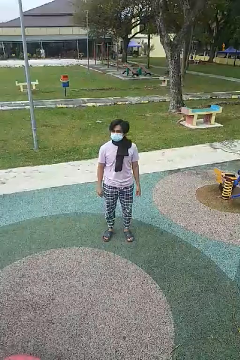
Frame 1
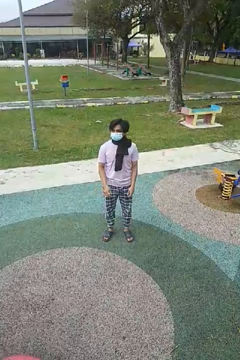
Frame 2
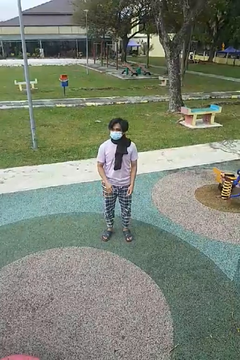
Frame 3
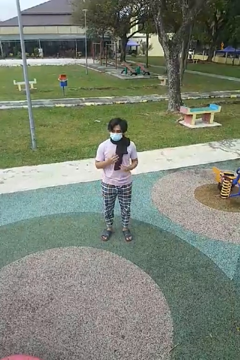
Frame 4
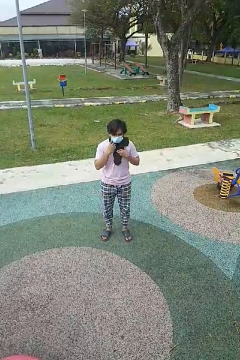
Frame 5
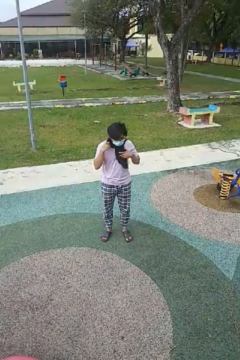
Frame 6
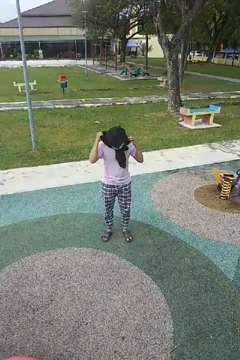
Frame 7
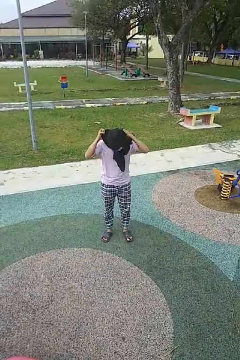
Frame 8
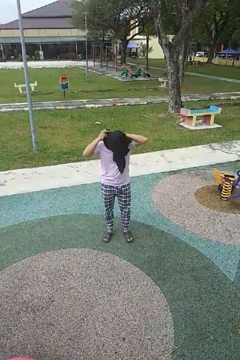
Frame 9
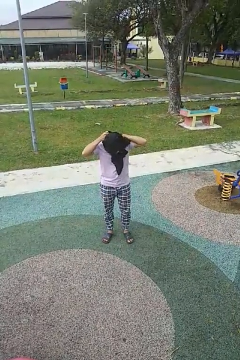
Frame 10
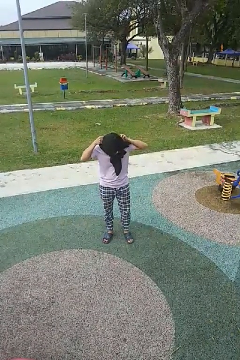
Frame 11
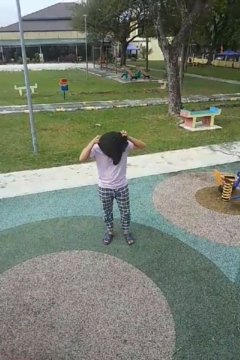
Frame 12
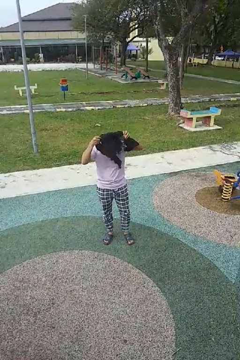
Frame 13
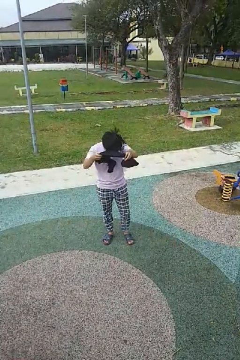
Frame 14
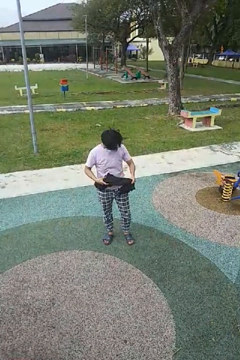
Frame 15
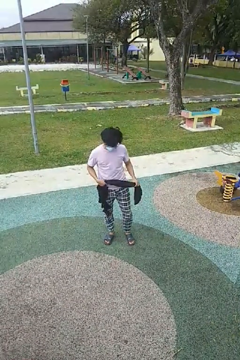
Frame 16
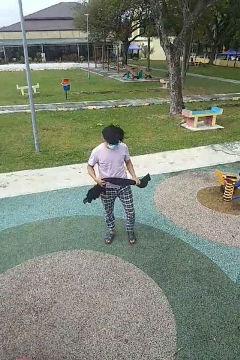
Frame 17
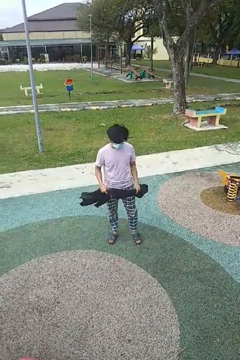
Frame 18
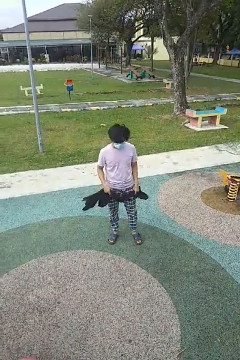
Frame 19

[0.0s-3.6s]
person takes off scarf

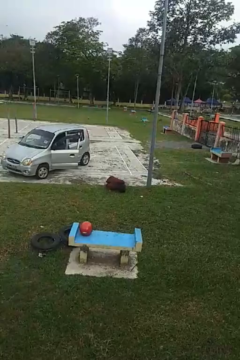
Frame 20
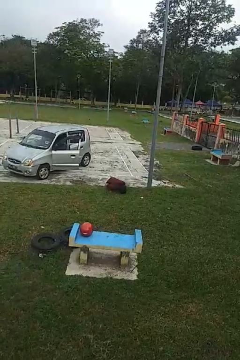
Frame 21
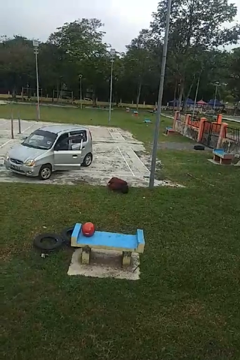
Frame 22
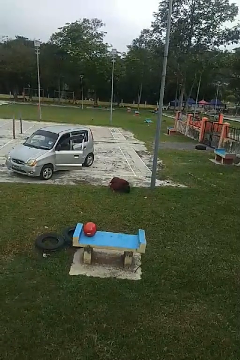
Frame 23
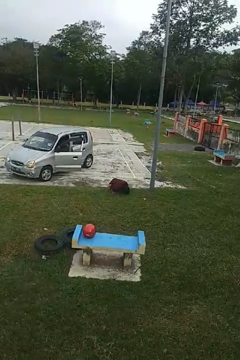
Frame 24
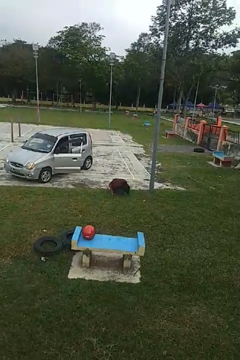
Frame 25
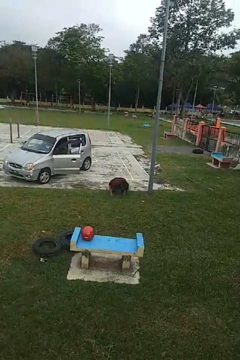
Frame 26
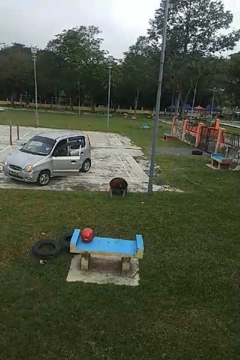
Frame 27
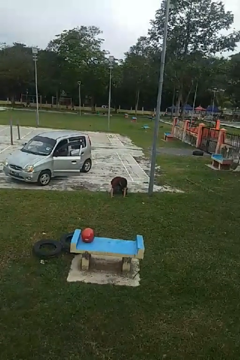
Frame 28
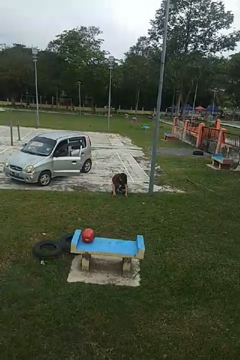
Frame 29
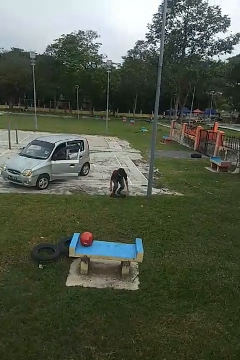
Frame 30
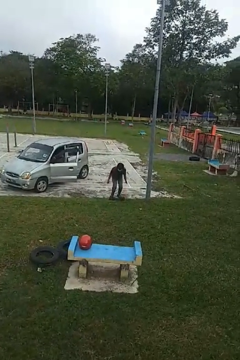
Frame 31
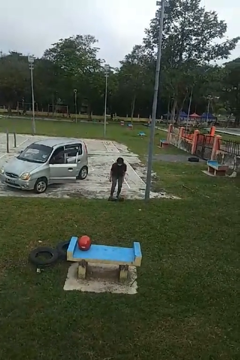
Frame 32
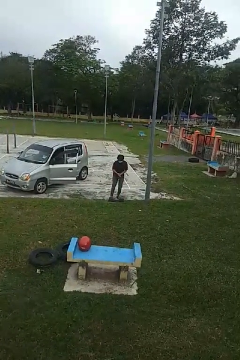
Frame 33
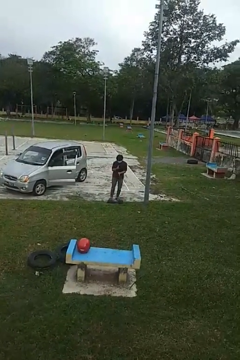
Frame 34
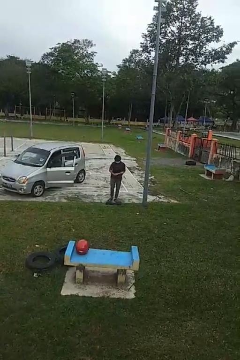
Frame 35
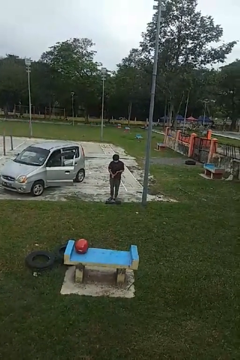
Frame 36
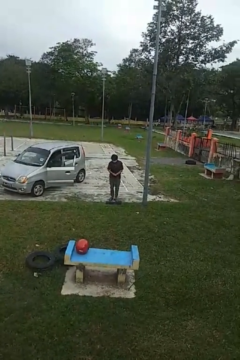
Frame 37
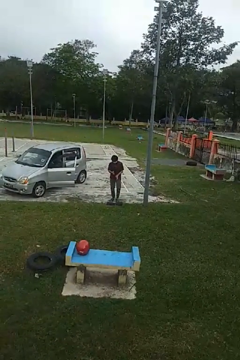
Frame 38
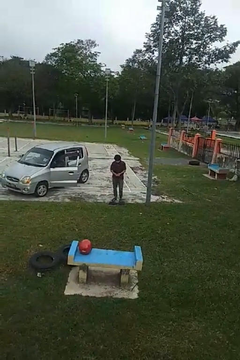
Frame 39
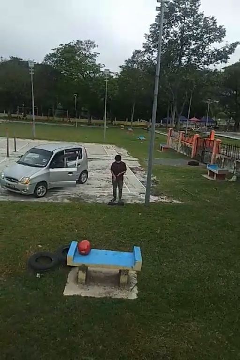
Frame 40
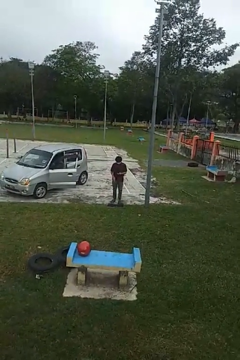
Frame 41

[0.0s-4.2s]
person stands up from floor

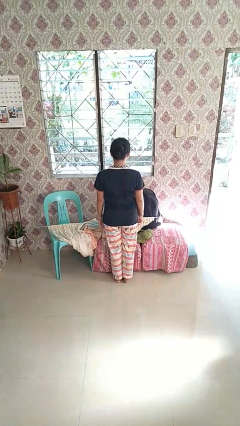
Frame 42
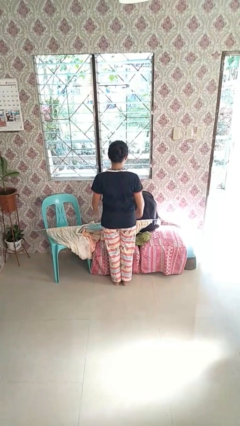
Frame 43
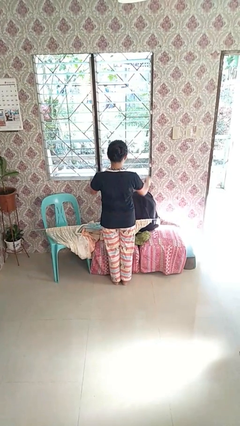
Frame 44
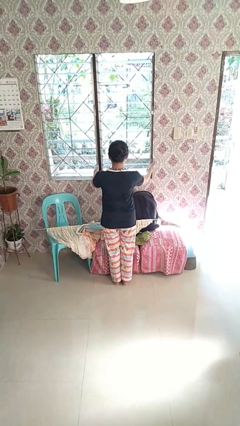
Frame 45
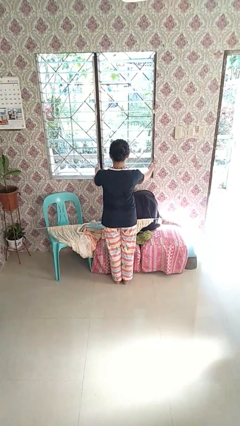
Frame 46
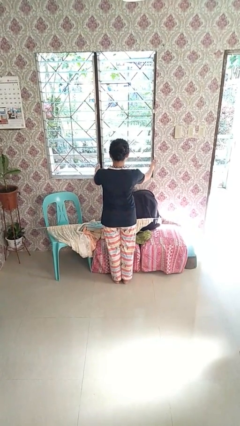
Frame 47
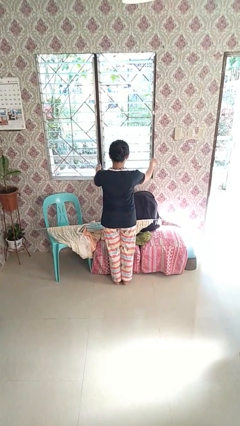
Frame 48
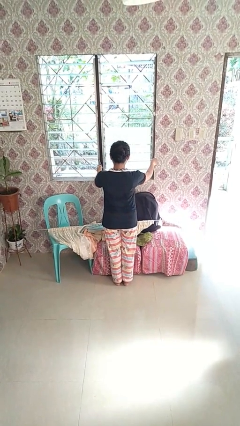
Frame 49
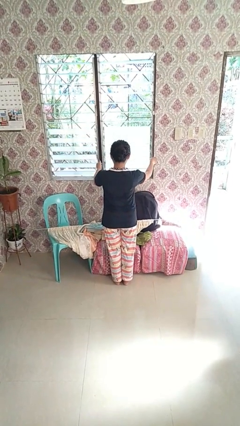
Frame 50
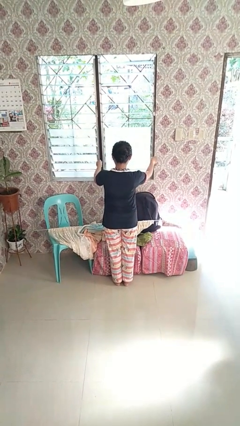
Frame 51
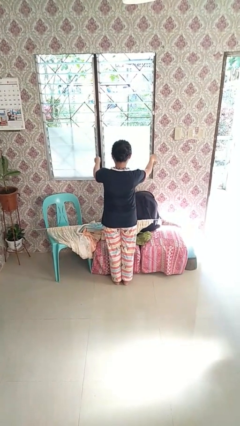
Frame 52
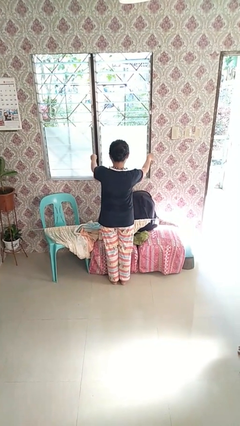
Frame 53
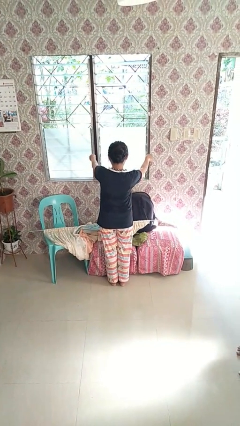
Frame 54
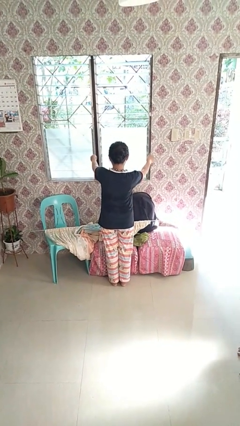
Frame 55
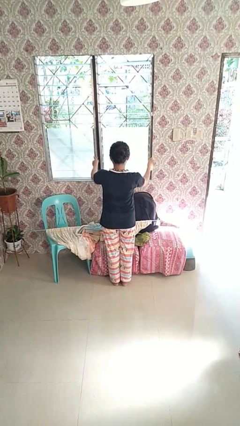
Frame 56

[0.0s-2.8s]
person closes home window

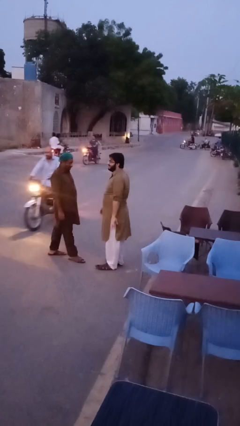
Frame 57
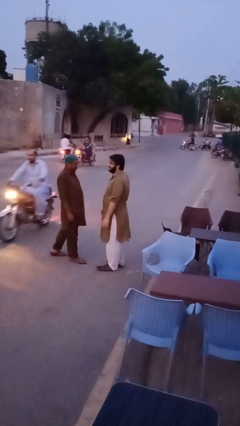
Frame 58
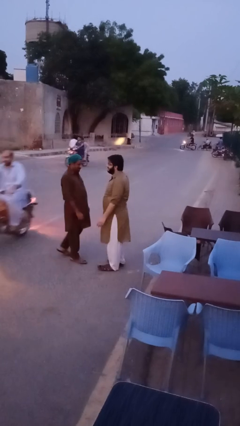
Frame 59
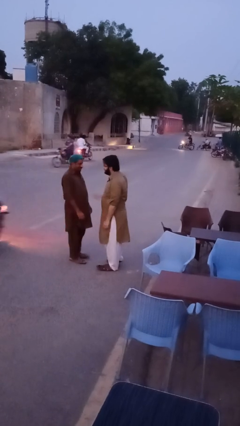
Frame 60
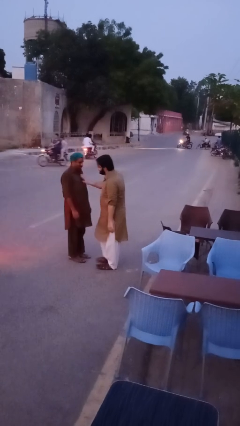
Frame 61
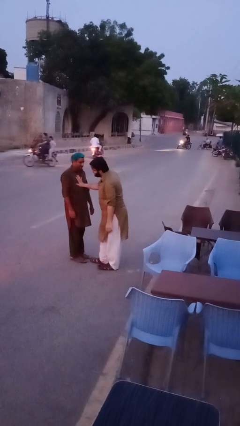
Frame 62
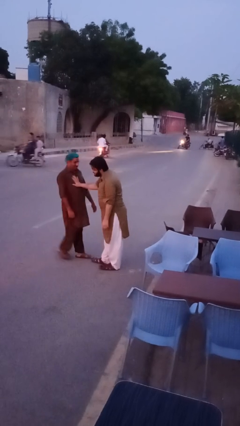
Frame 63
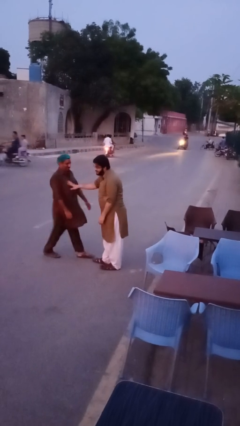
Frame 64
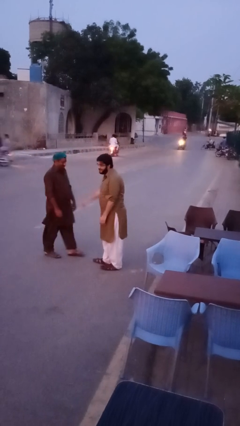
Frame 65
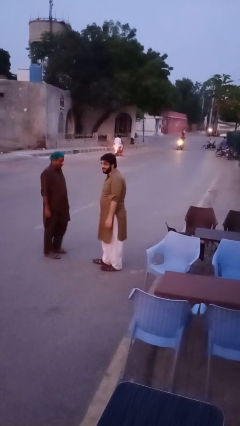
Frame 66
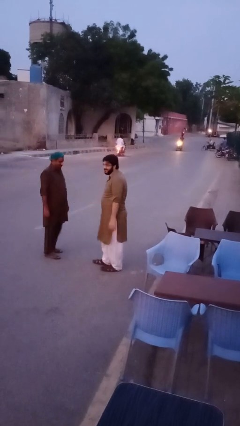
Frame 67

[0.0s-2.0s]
person shoves person

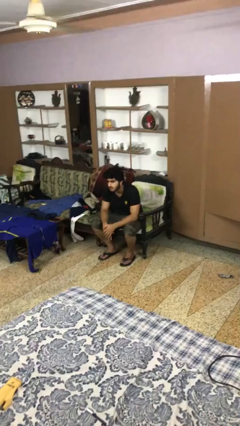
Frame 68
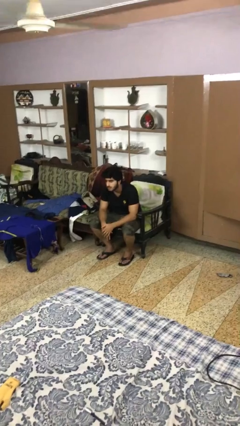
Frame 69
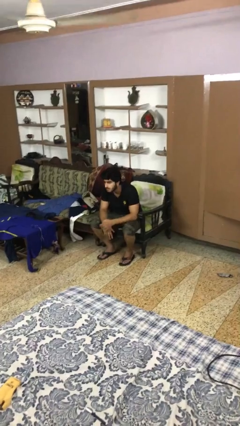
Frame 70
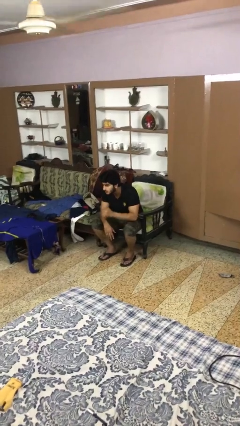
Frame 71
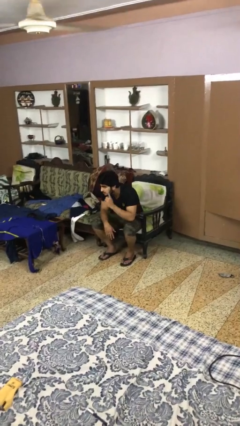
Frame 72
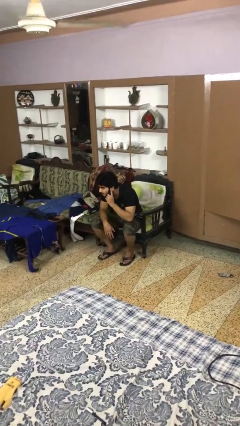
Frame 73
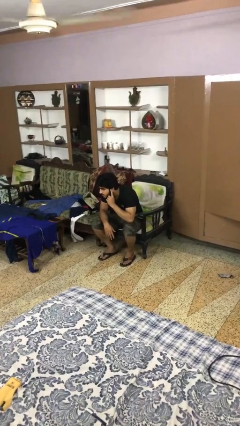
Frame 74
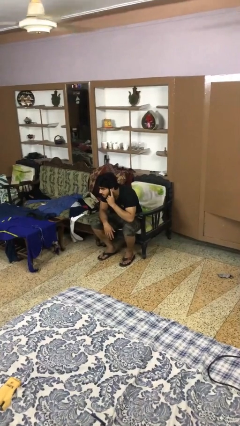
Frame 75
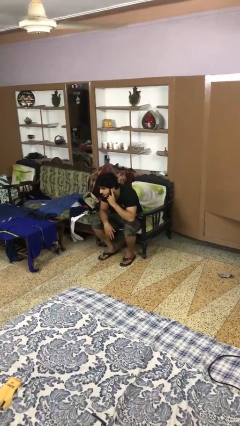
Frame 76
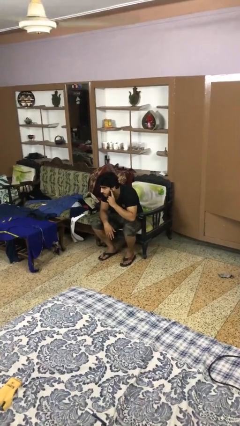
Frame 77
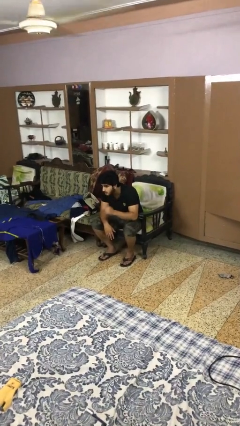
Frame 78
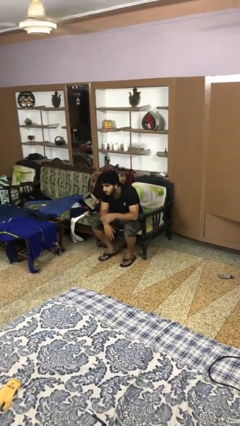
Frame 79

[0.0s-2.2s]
person gestures listen closely

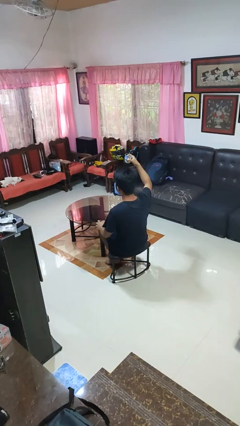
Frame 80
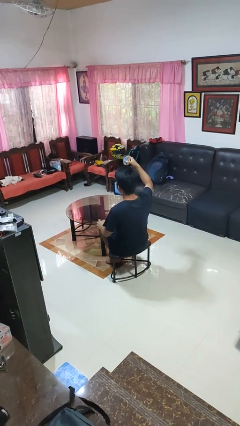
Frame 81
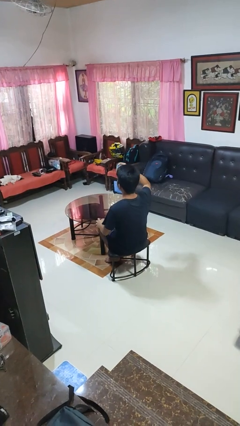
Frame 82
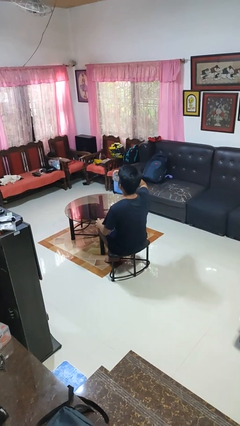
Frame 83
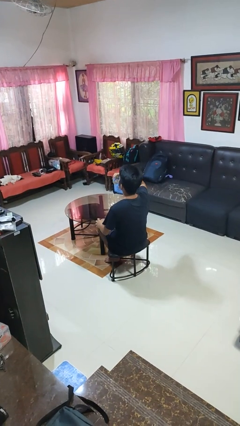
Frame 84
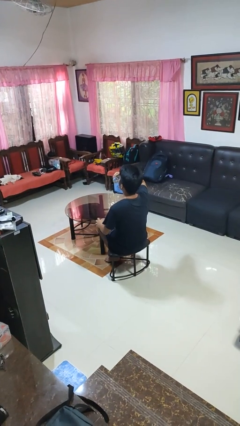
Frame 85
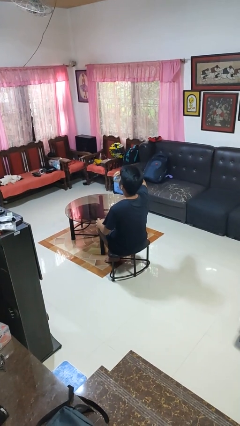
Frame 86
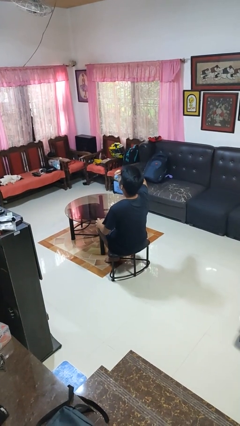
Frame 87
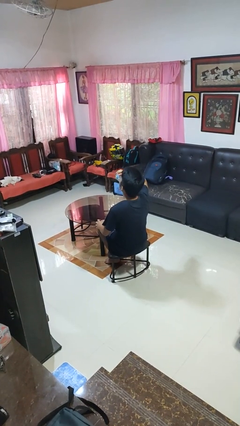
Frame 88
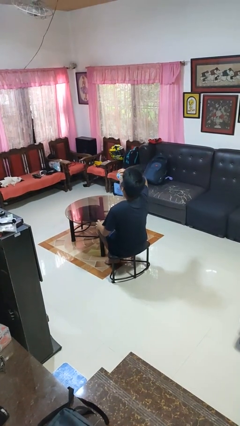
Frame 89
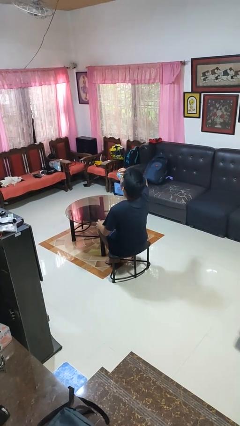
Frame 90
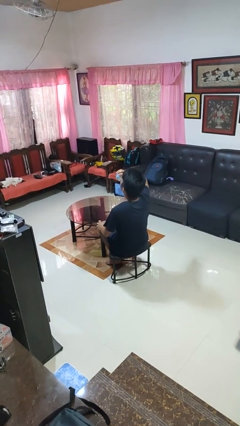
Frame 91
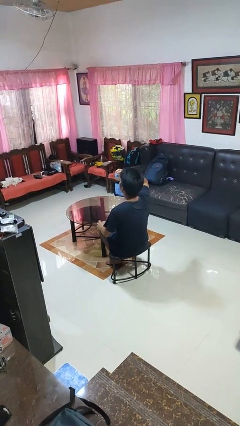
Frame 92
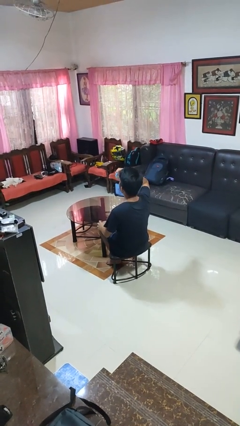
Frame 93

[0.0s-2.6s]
person drinks from shotglass

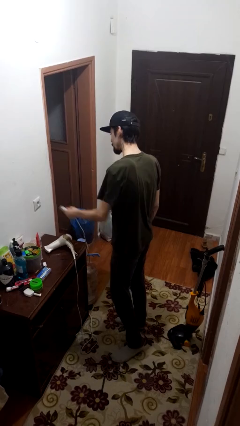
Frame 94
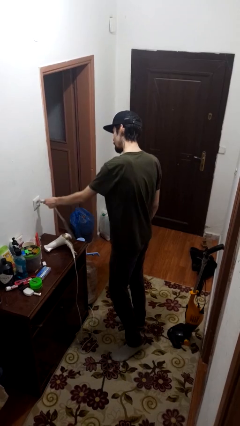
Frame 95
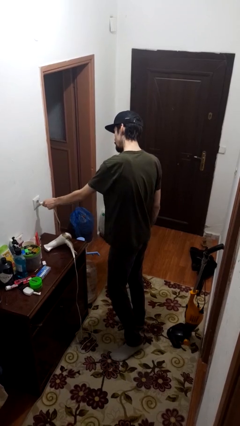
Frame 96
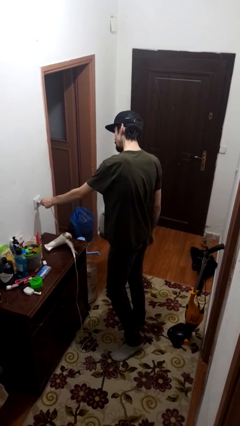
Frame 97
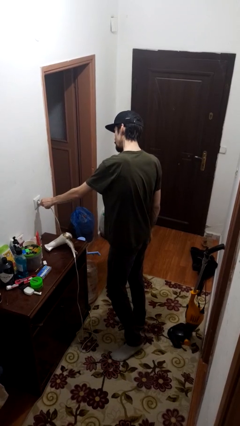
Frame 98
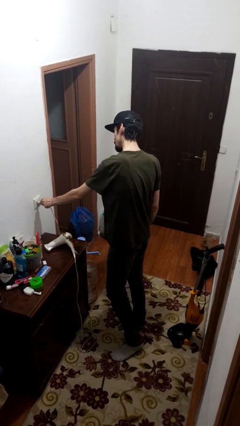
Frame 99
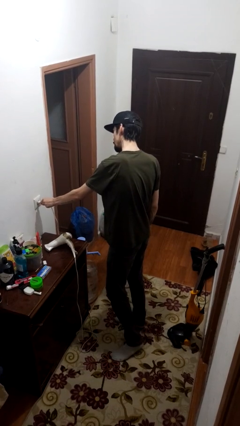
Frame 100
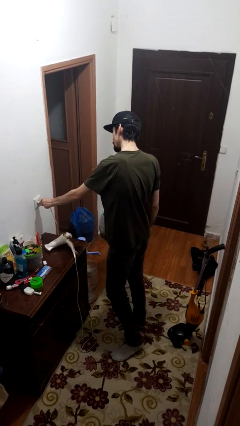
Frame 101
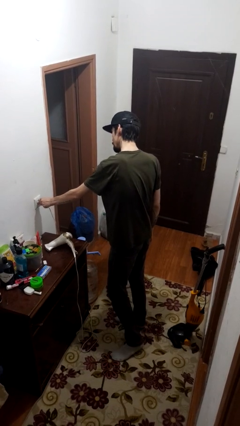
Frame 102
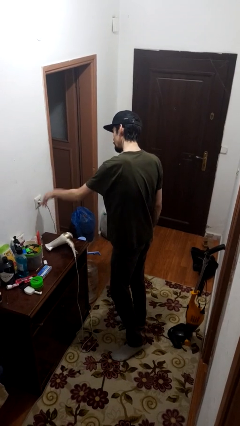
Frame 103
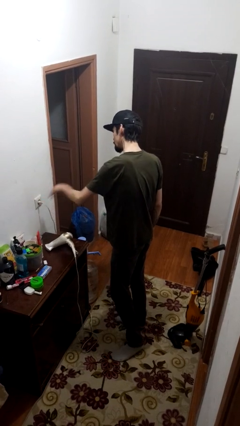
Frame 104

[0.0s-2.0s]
person plugs into electrical socket
